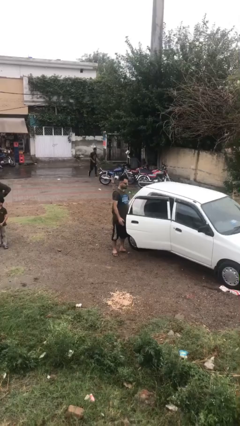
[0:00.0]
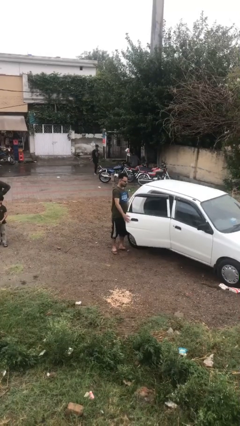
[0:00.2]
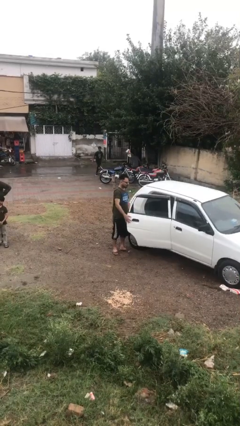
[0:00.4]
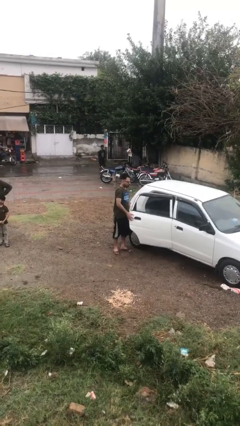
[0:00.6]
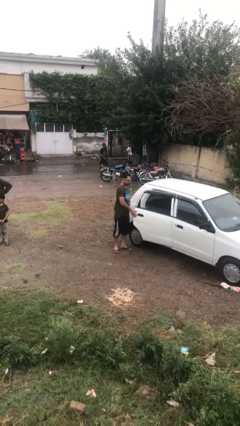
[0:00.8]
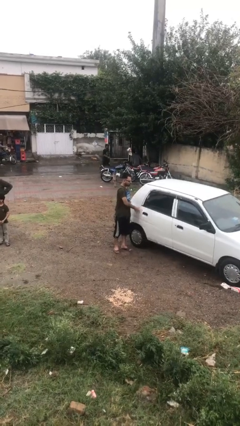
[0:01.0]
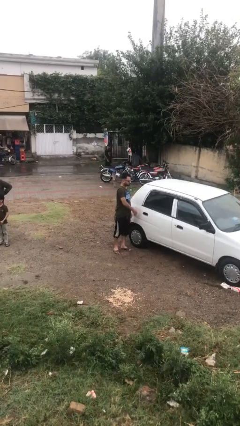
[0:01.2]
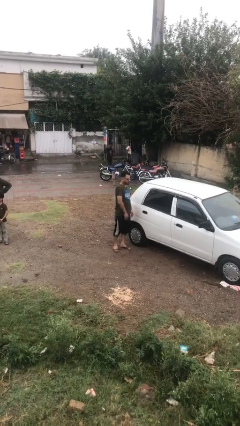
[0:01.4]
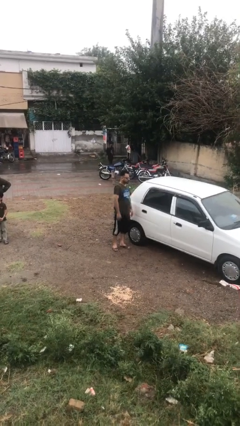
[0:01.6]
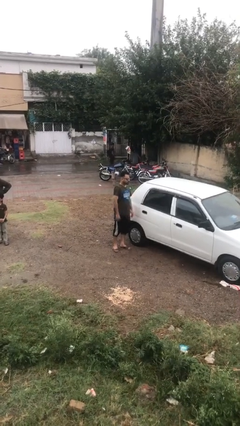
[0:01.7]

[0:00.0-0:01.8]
person closes car door

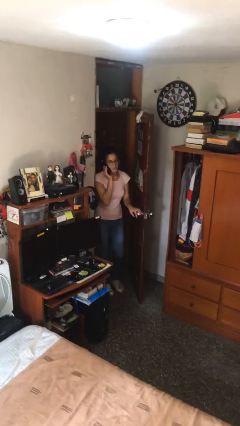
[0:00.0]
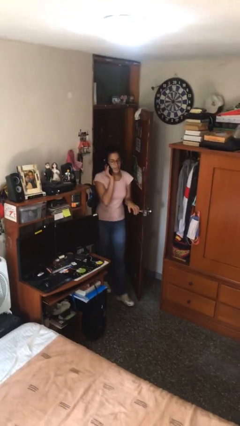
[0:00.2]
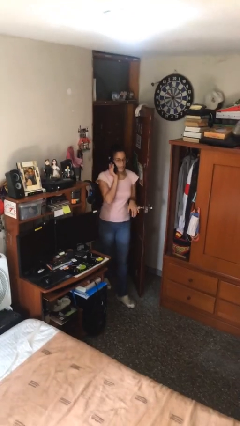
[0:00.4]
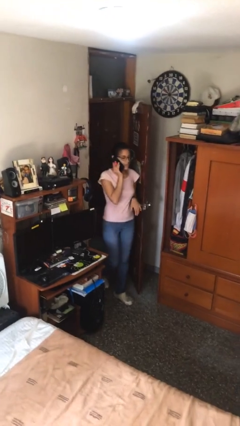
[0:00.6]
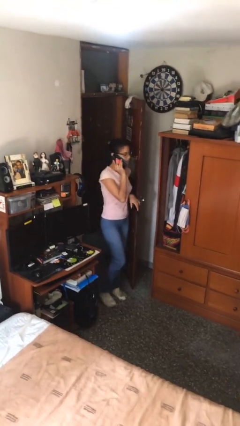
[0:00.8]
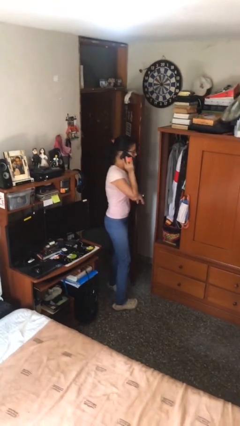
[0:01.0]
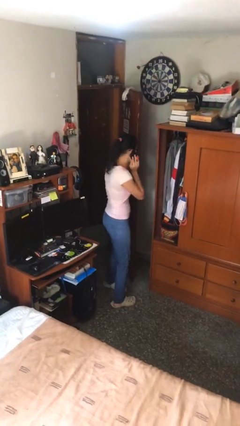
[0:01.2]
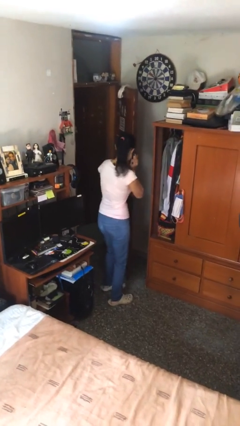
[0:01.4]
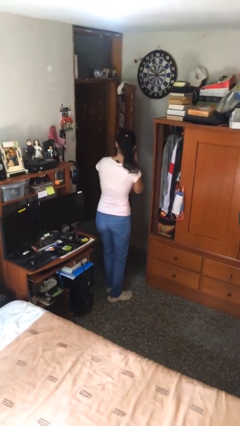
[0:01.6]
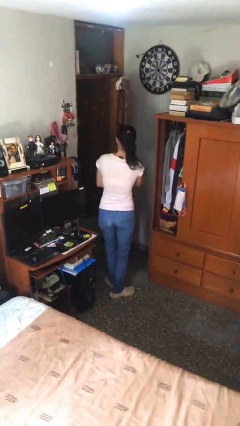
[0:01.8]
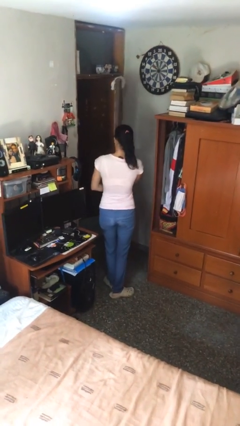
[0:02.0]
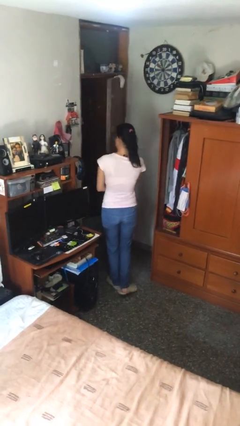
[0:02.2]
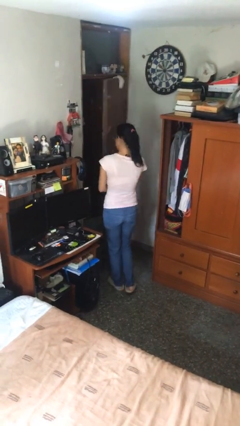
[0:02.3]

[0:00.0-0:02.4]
person enters scene through structure

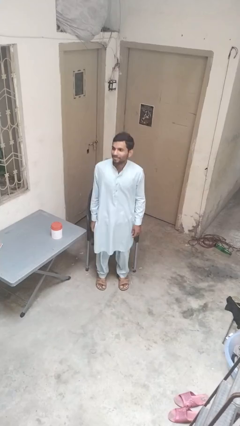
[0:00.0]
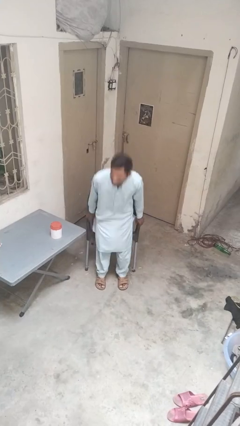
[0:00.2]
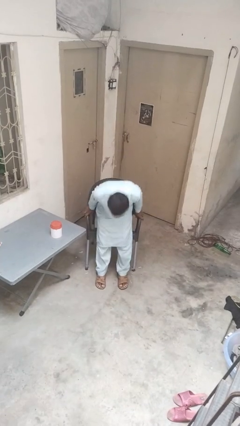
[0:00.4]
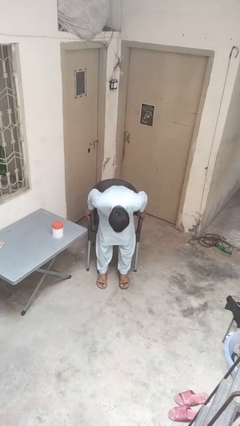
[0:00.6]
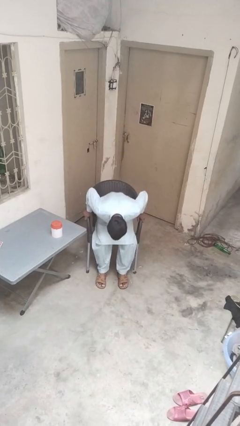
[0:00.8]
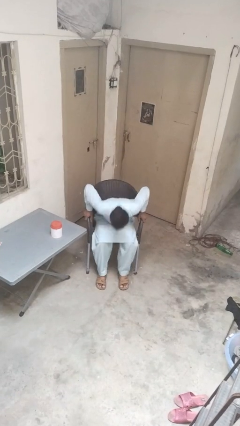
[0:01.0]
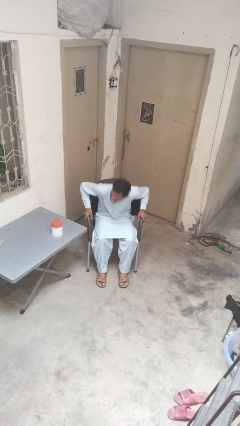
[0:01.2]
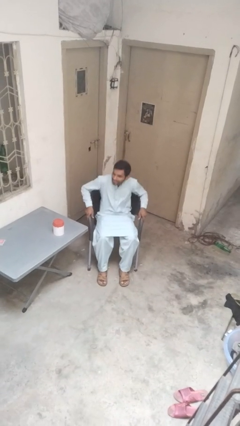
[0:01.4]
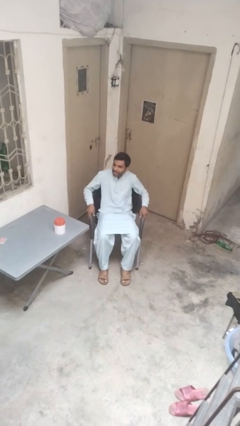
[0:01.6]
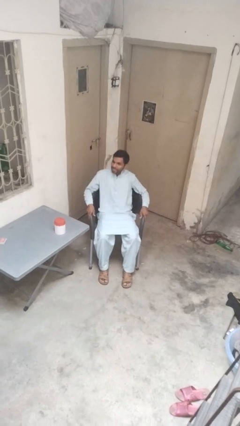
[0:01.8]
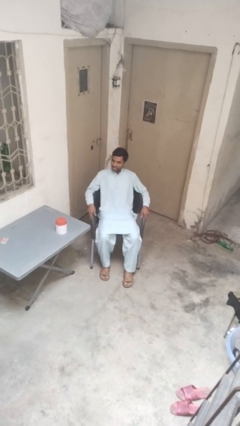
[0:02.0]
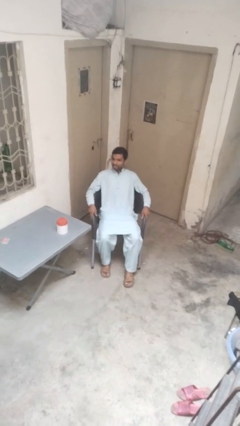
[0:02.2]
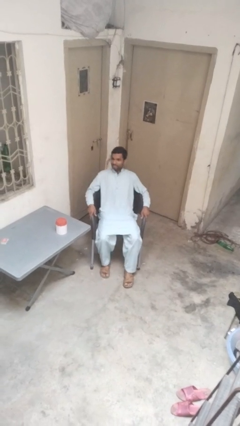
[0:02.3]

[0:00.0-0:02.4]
person sits down

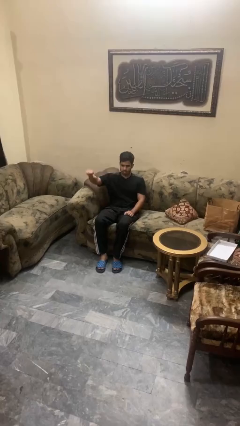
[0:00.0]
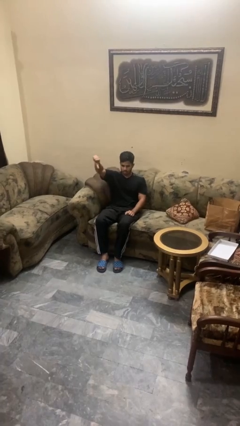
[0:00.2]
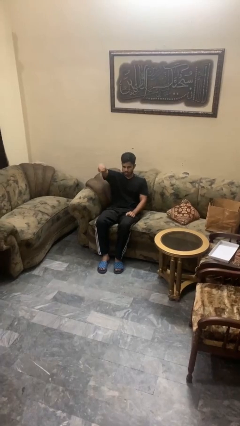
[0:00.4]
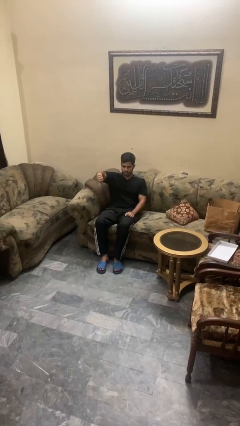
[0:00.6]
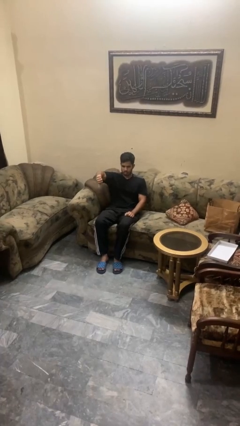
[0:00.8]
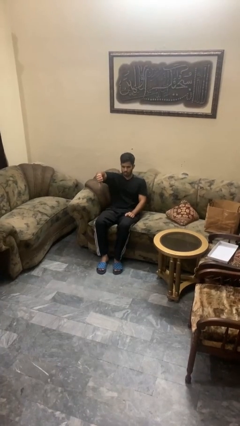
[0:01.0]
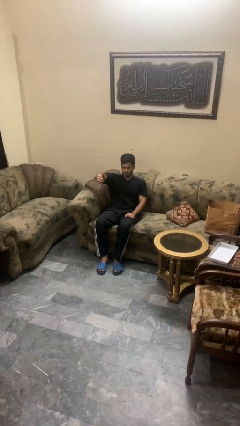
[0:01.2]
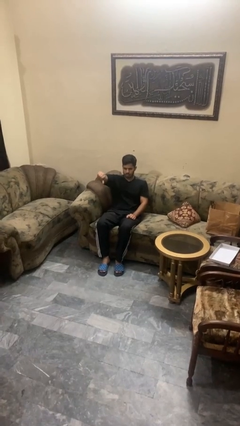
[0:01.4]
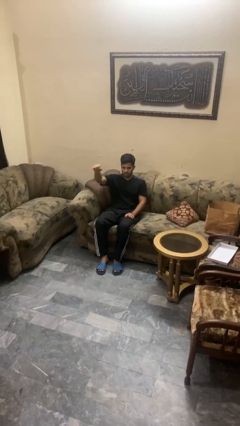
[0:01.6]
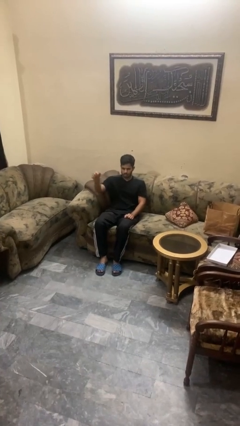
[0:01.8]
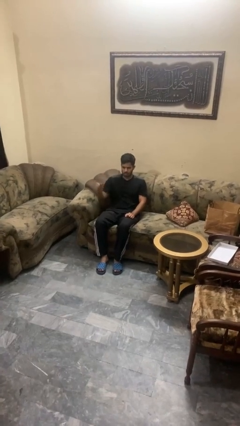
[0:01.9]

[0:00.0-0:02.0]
person gestures thumbs down

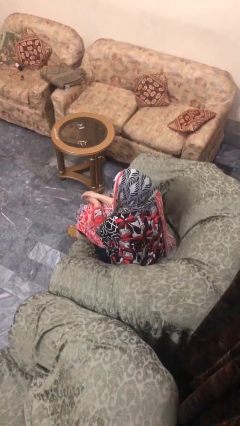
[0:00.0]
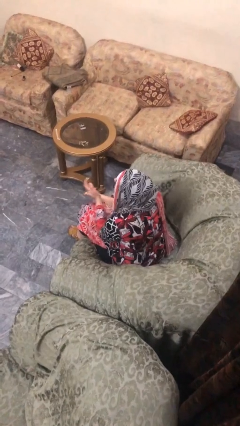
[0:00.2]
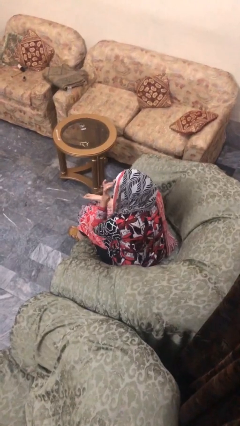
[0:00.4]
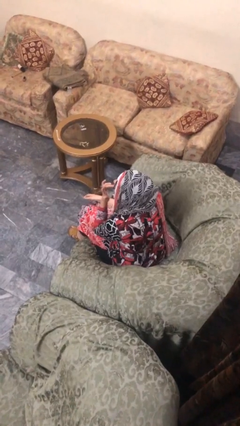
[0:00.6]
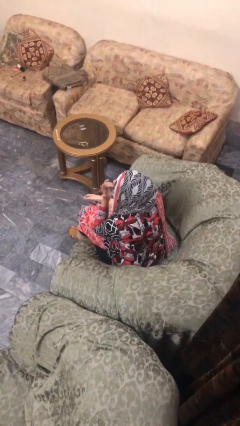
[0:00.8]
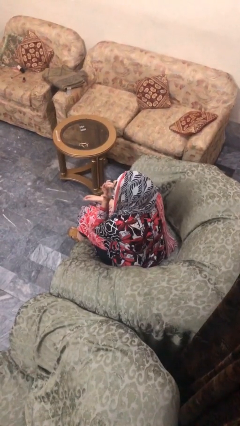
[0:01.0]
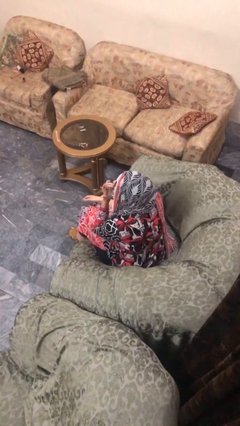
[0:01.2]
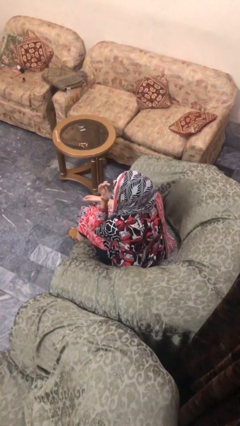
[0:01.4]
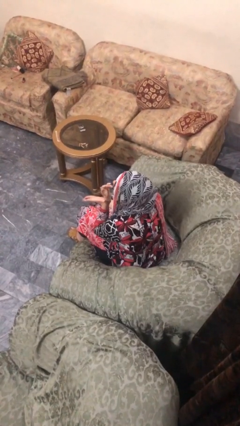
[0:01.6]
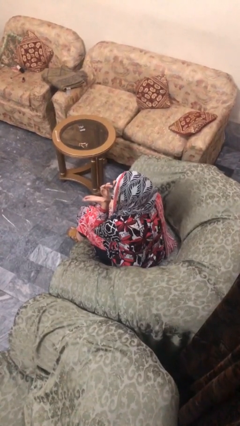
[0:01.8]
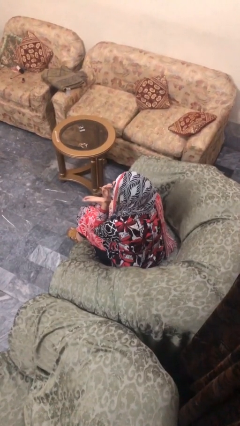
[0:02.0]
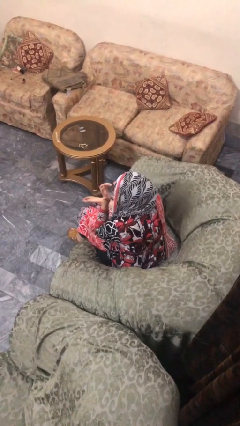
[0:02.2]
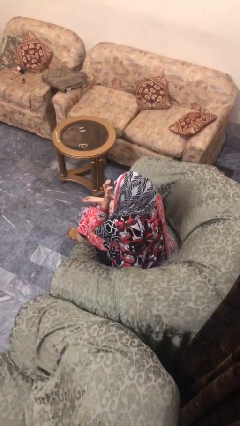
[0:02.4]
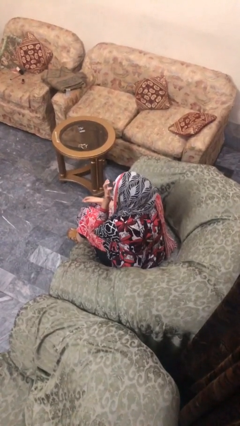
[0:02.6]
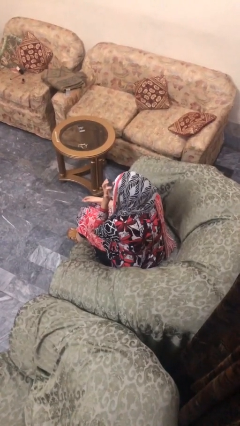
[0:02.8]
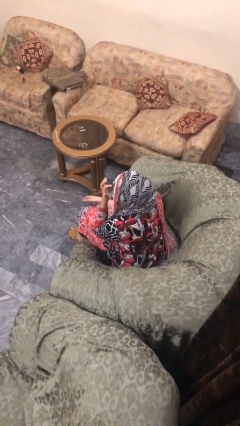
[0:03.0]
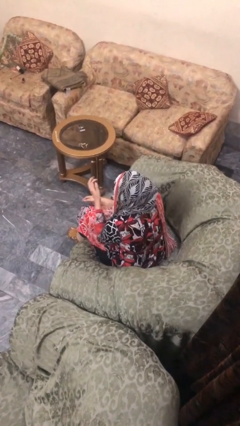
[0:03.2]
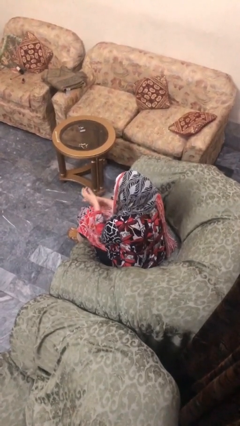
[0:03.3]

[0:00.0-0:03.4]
person licks fingers

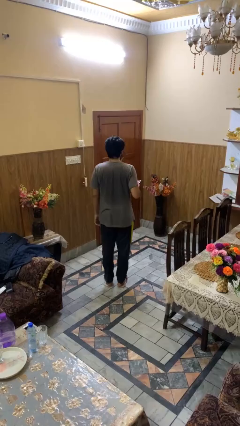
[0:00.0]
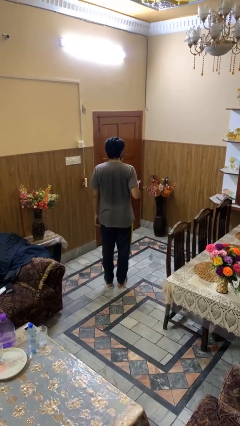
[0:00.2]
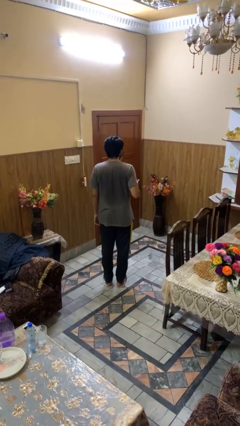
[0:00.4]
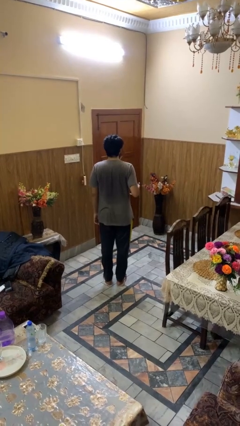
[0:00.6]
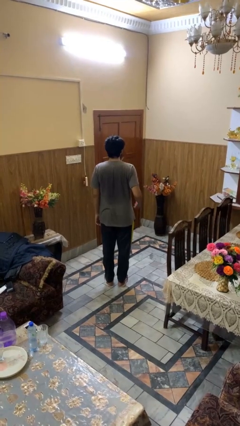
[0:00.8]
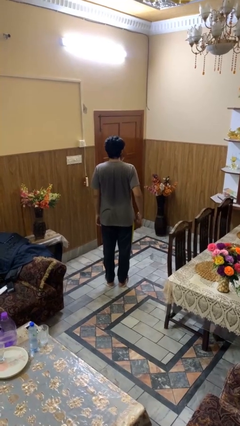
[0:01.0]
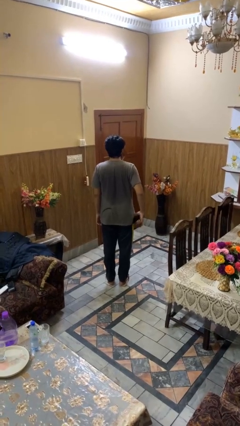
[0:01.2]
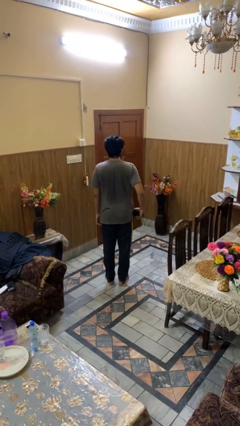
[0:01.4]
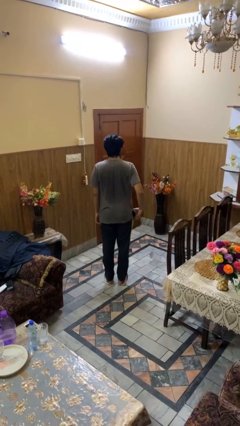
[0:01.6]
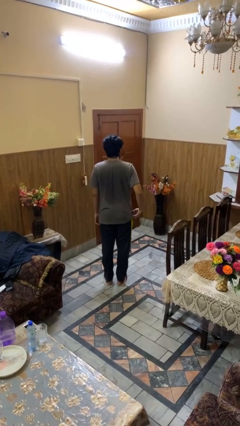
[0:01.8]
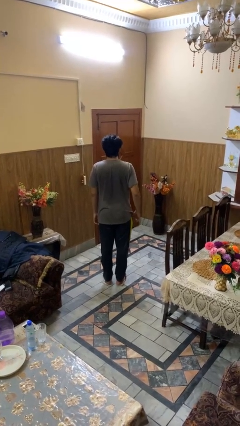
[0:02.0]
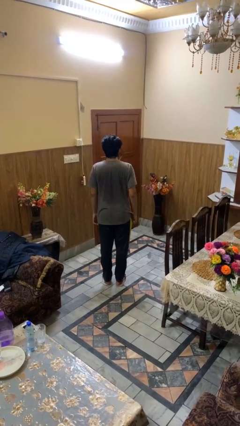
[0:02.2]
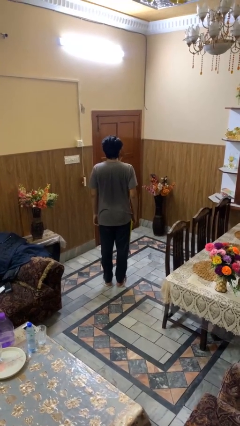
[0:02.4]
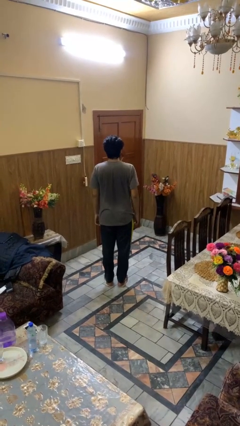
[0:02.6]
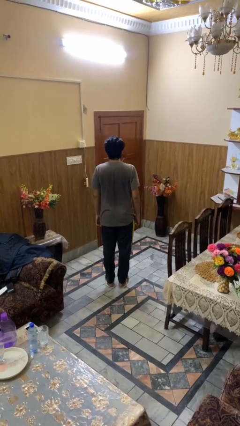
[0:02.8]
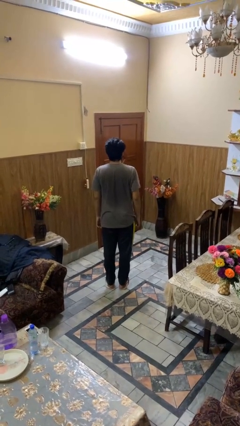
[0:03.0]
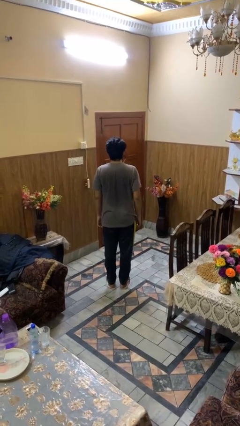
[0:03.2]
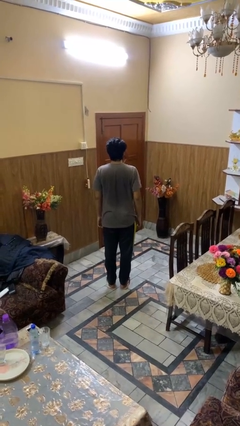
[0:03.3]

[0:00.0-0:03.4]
person puts phone into pocket

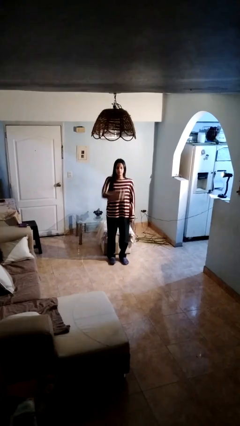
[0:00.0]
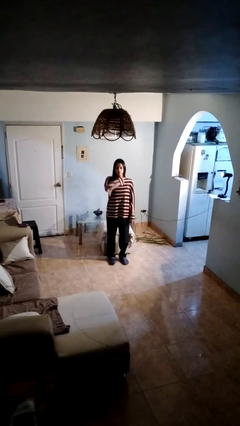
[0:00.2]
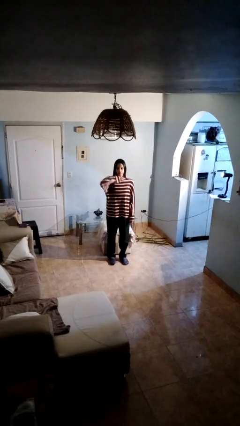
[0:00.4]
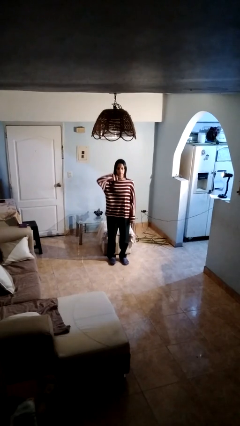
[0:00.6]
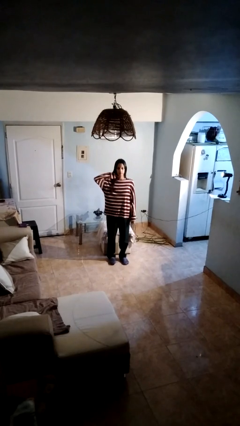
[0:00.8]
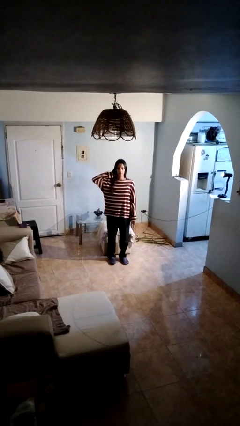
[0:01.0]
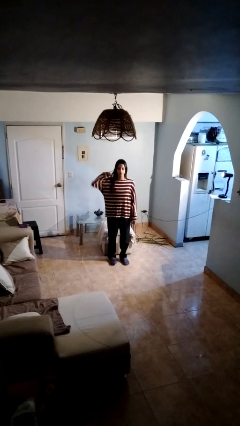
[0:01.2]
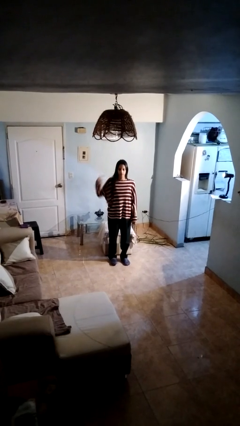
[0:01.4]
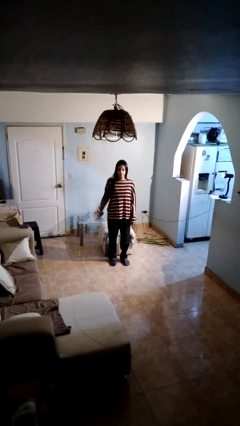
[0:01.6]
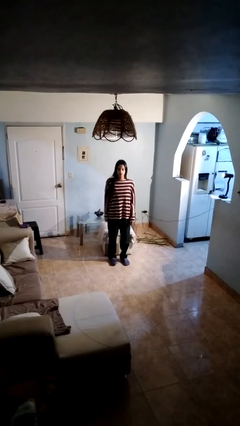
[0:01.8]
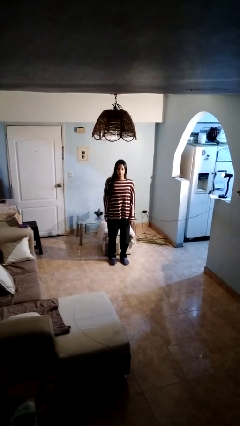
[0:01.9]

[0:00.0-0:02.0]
person gestures cut
